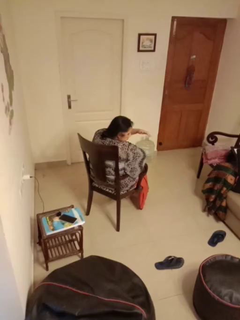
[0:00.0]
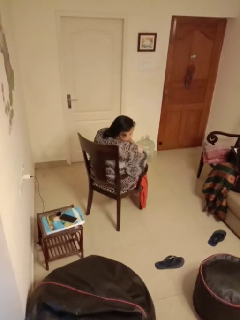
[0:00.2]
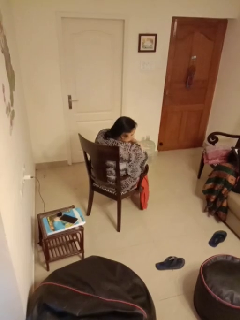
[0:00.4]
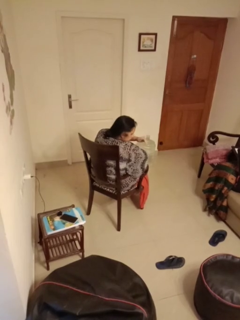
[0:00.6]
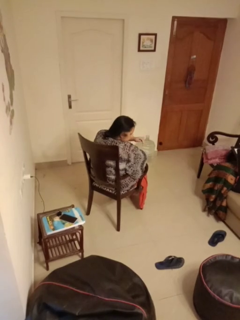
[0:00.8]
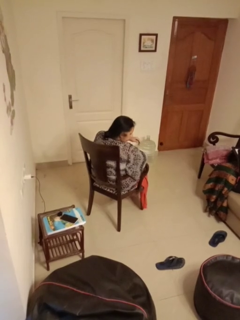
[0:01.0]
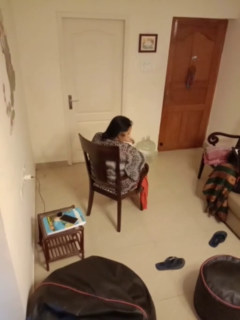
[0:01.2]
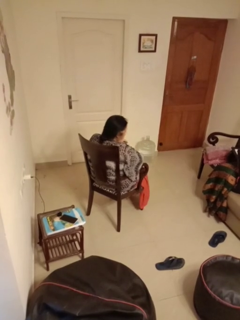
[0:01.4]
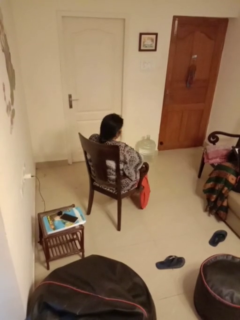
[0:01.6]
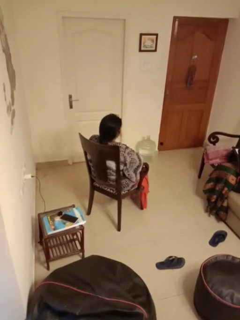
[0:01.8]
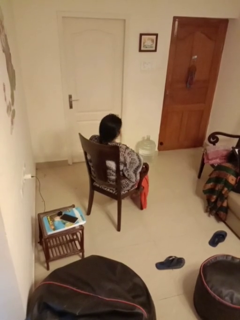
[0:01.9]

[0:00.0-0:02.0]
person swats bug

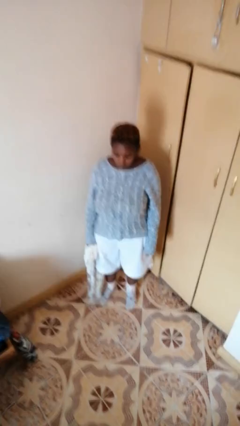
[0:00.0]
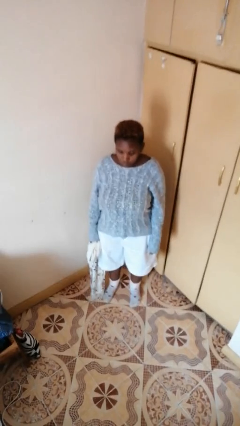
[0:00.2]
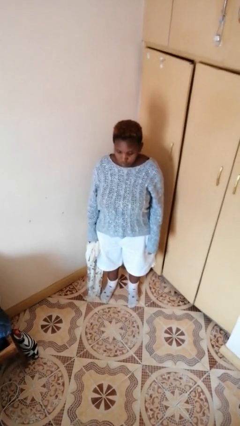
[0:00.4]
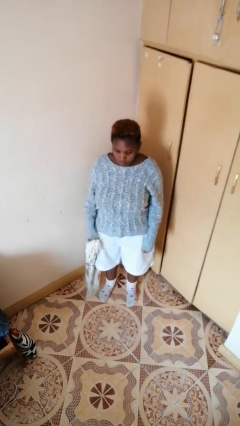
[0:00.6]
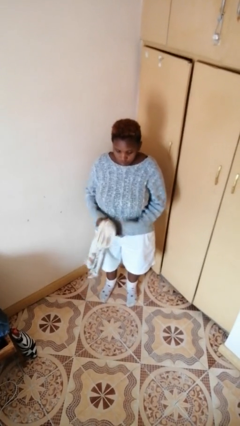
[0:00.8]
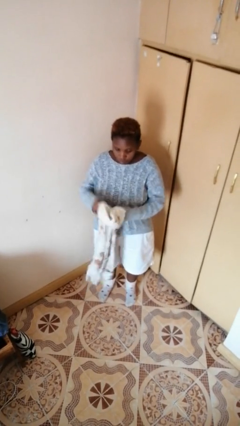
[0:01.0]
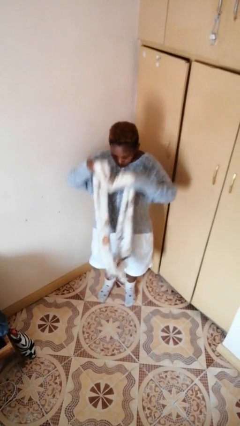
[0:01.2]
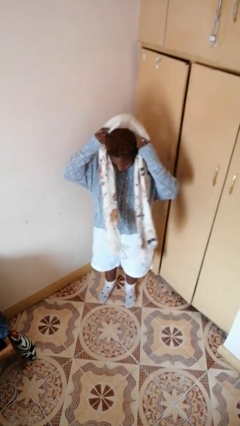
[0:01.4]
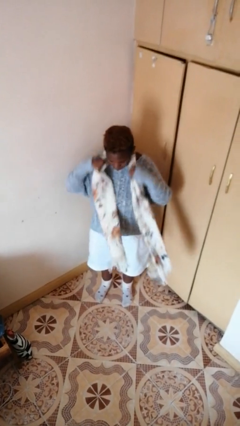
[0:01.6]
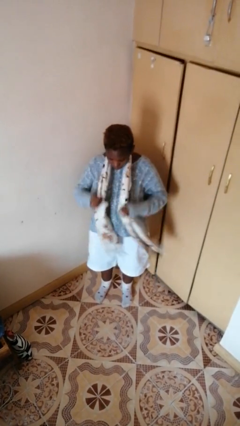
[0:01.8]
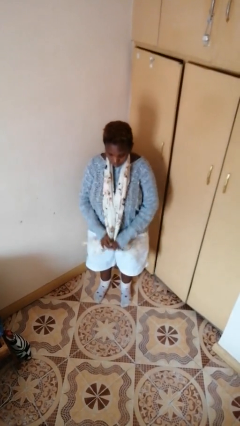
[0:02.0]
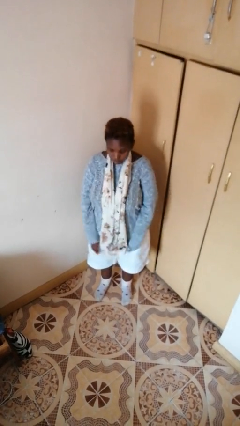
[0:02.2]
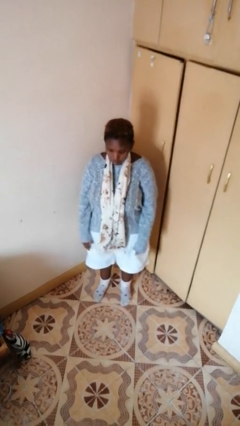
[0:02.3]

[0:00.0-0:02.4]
person puts on scarf

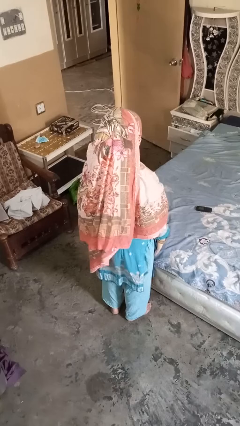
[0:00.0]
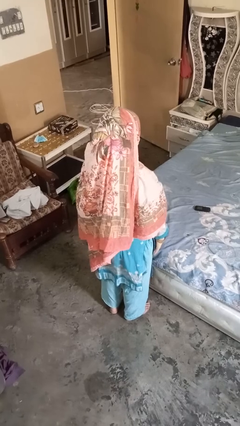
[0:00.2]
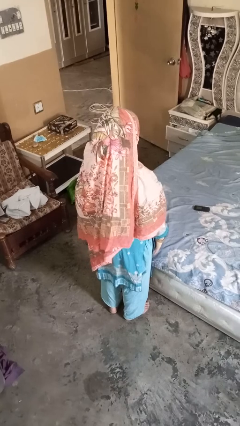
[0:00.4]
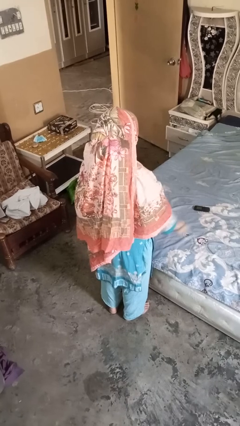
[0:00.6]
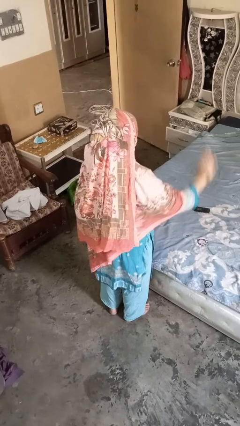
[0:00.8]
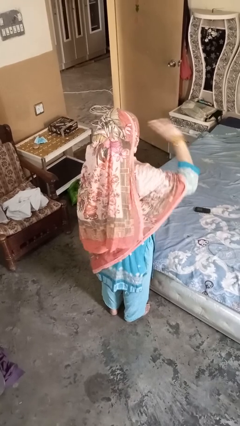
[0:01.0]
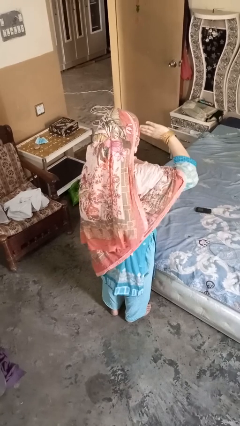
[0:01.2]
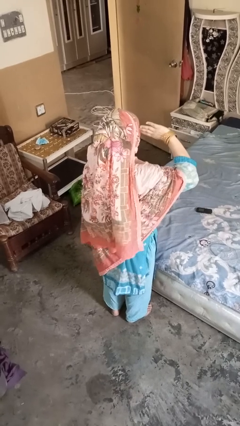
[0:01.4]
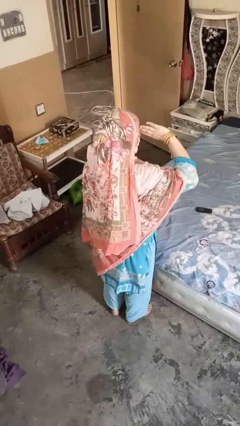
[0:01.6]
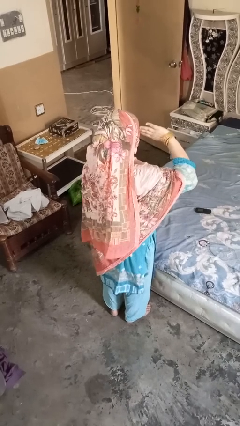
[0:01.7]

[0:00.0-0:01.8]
person salutes

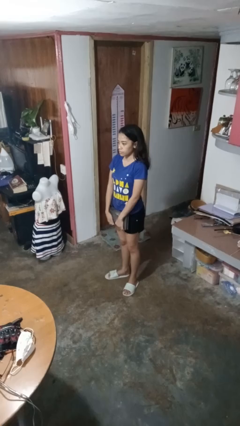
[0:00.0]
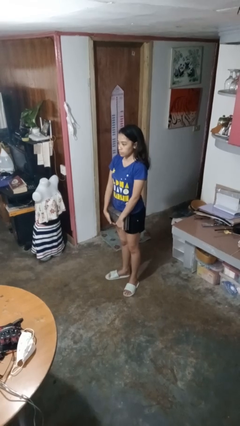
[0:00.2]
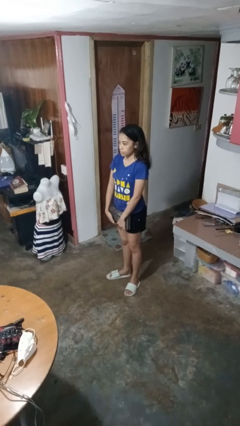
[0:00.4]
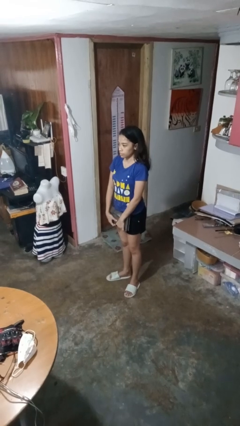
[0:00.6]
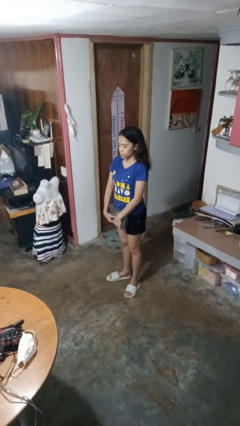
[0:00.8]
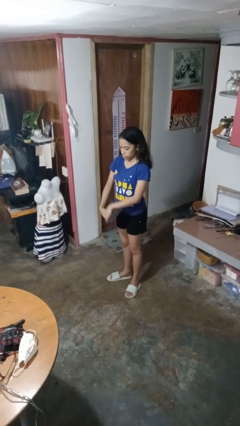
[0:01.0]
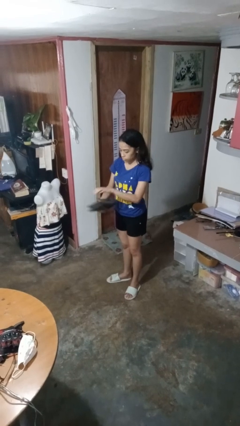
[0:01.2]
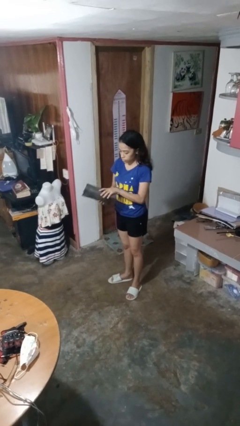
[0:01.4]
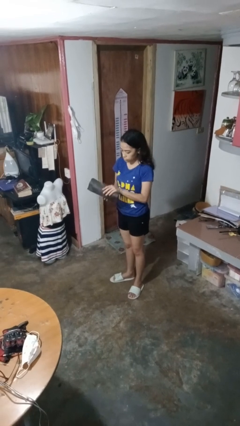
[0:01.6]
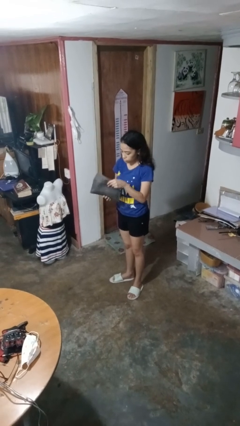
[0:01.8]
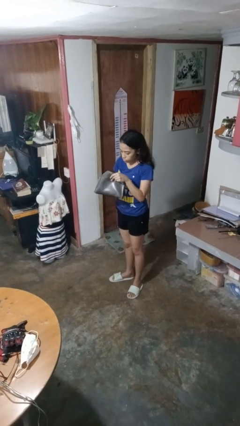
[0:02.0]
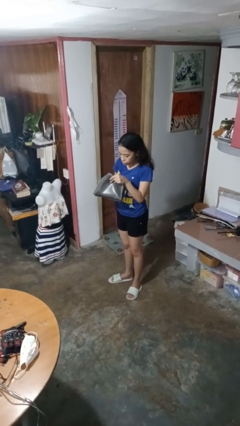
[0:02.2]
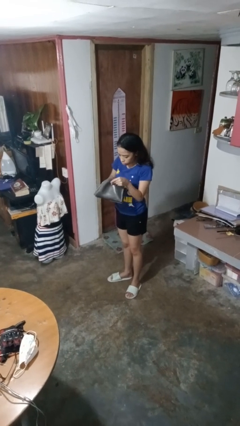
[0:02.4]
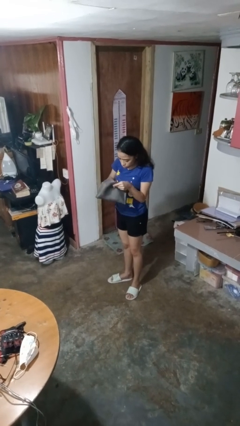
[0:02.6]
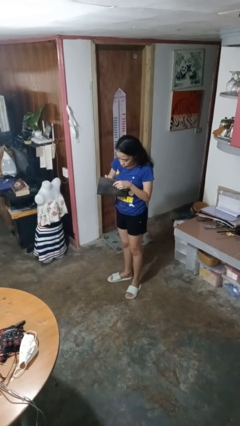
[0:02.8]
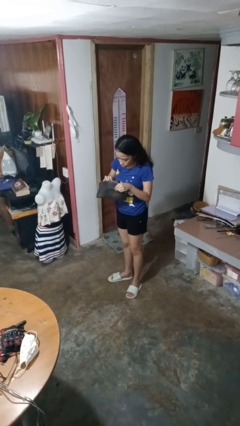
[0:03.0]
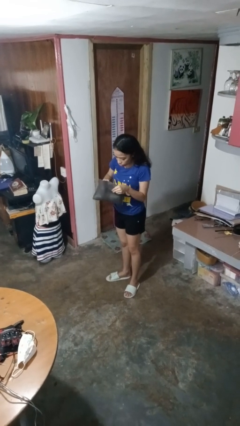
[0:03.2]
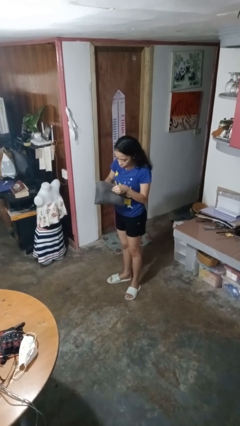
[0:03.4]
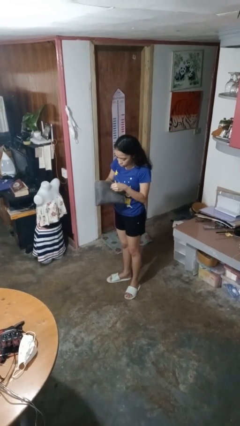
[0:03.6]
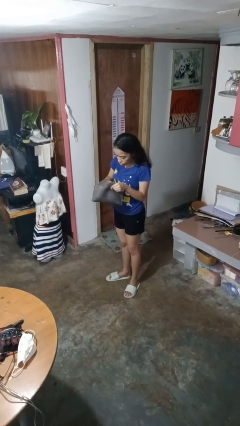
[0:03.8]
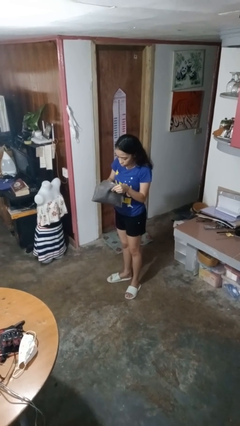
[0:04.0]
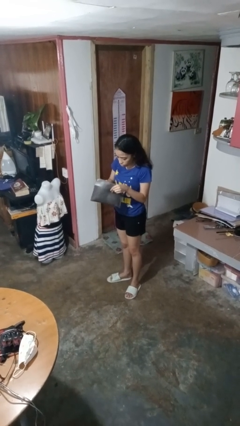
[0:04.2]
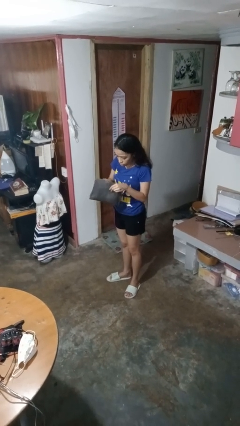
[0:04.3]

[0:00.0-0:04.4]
person searches in purse

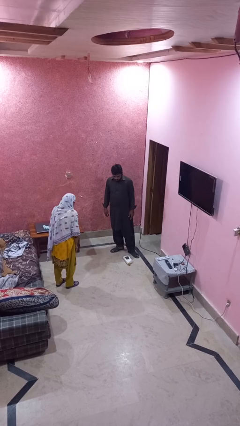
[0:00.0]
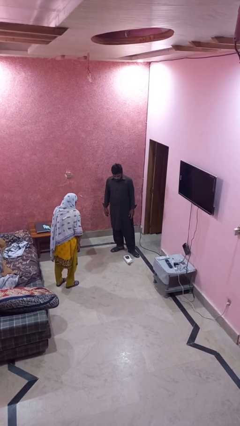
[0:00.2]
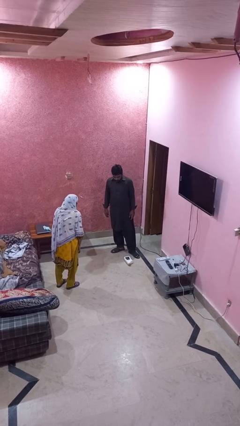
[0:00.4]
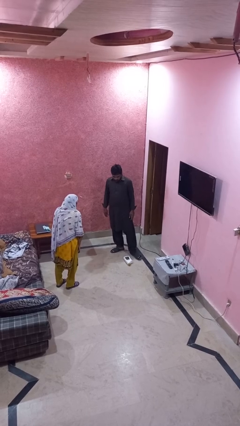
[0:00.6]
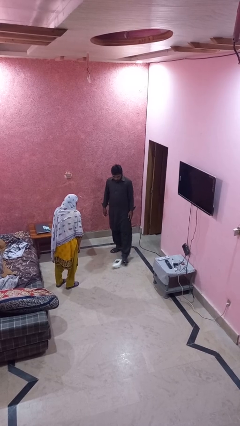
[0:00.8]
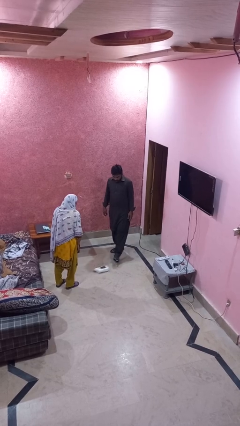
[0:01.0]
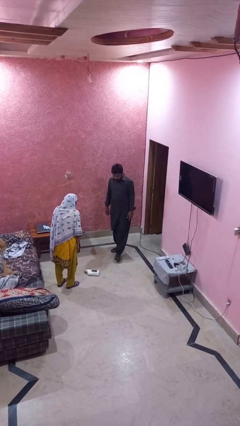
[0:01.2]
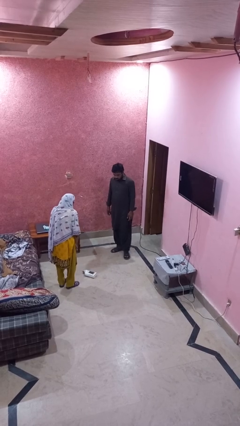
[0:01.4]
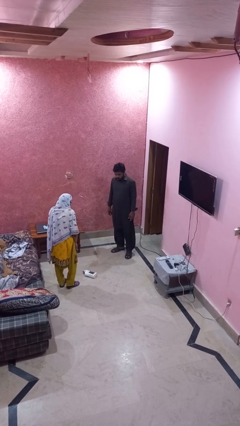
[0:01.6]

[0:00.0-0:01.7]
person kicks object to person

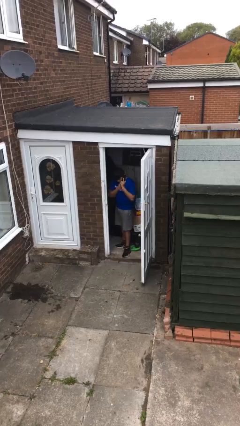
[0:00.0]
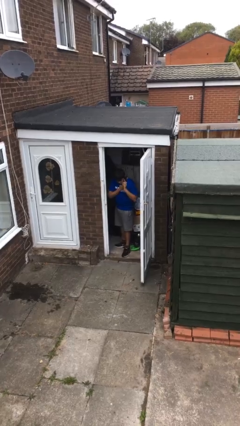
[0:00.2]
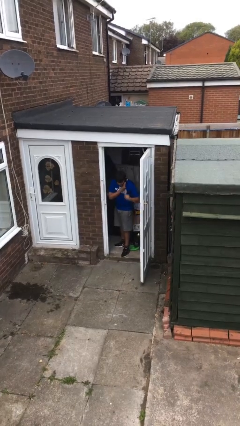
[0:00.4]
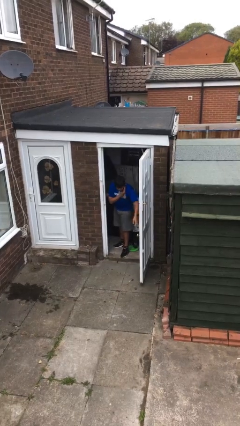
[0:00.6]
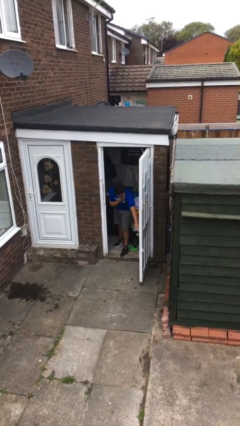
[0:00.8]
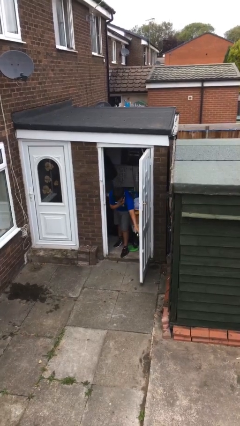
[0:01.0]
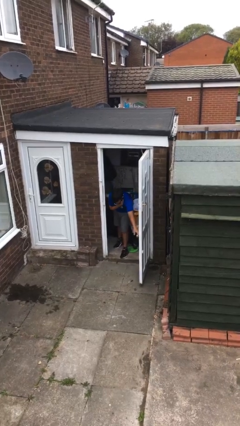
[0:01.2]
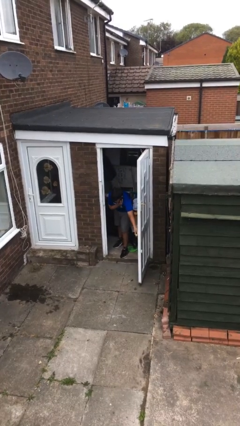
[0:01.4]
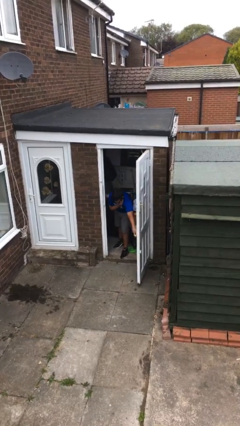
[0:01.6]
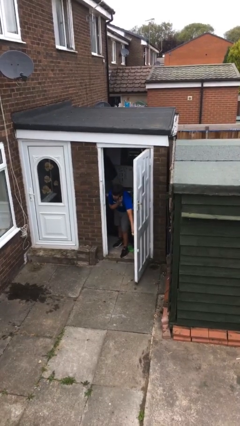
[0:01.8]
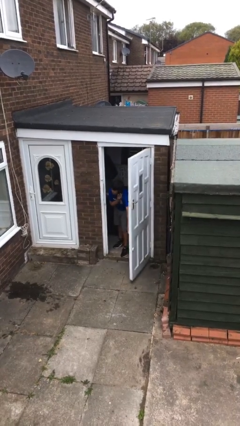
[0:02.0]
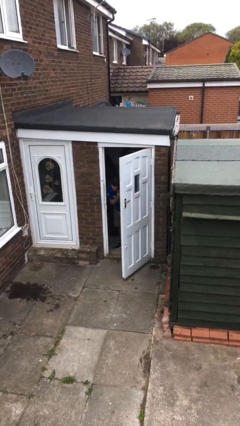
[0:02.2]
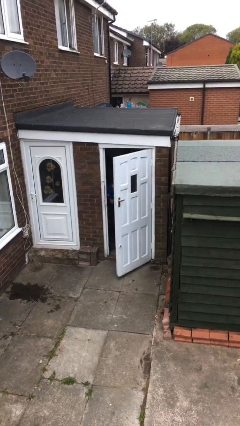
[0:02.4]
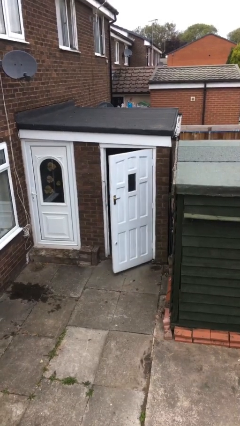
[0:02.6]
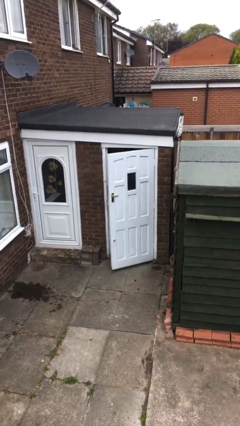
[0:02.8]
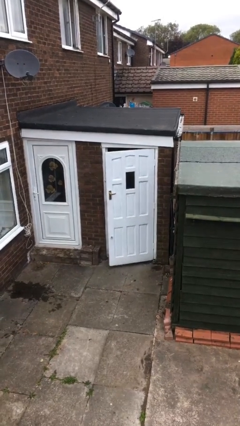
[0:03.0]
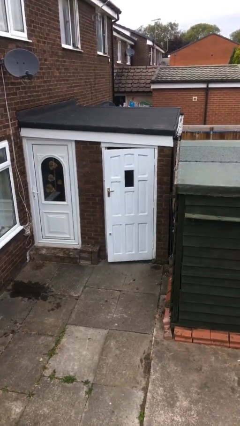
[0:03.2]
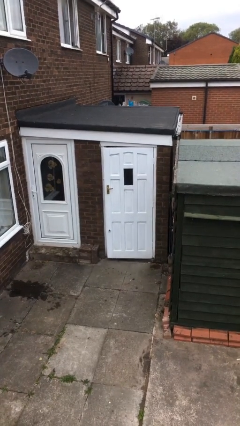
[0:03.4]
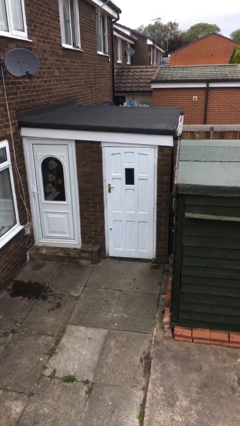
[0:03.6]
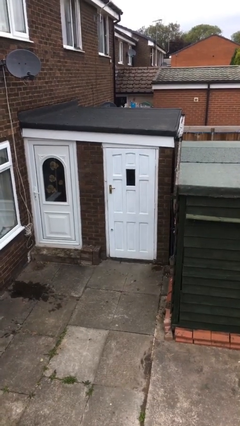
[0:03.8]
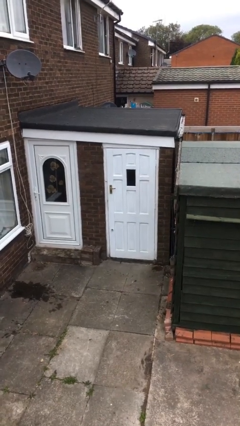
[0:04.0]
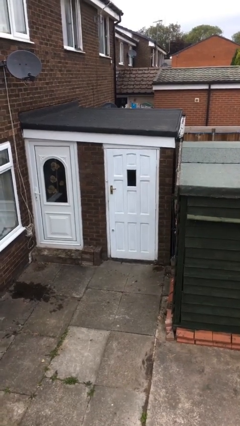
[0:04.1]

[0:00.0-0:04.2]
person closes facility door

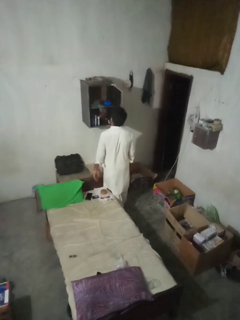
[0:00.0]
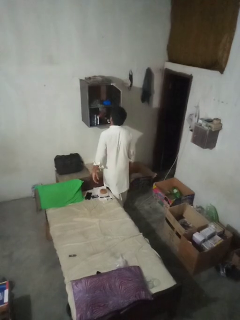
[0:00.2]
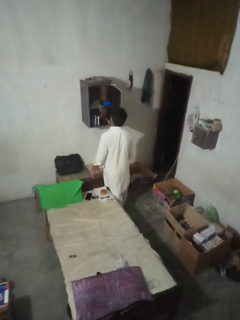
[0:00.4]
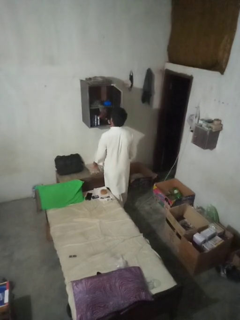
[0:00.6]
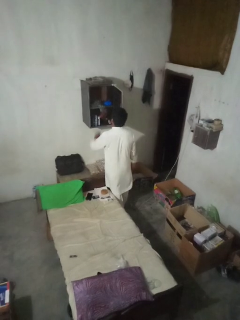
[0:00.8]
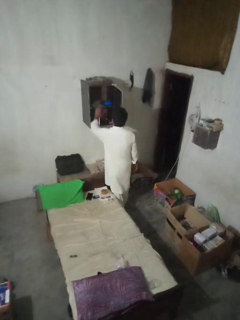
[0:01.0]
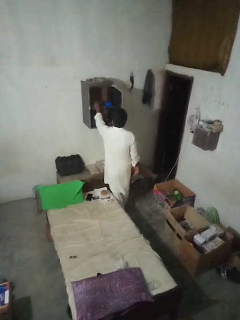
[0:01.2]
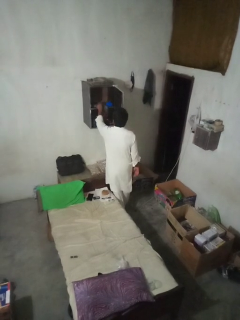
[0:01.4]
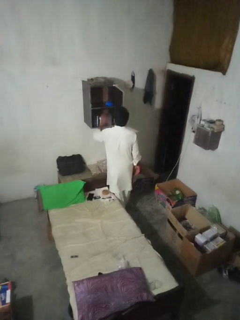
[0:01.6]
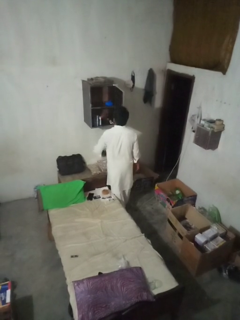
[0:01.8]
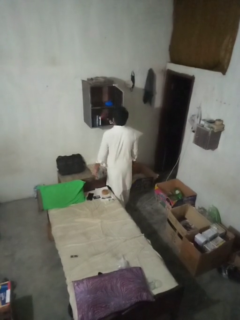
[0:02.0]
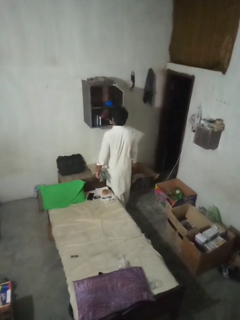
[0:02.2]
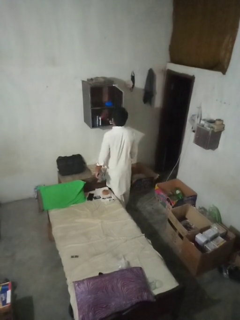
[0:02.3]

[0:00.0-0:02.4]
person takes clothes from dresser
